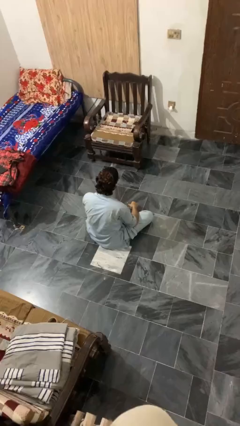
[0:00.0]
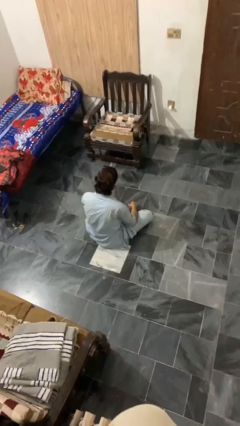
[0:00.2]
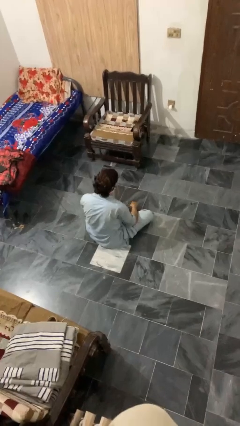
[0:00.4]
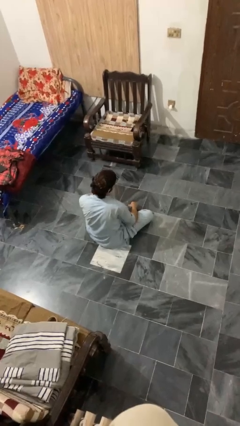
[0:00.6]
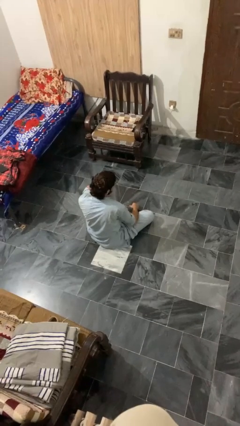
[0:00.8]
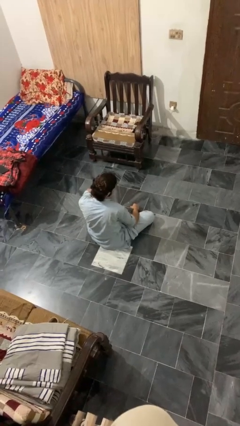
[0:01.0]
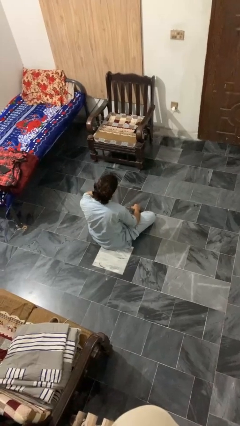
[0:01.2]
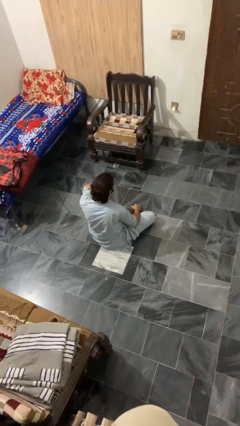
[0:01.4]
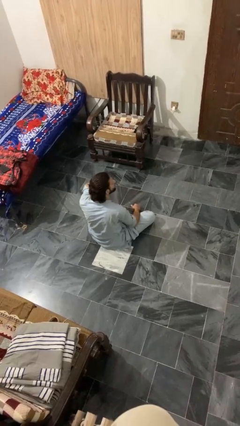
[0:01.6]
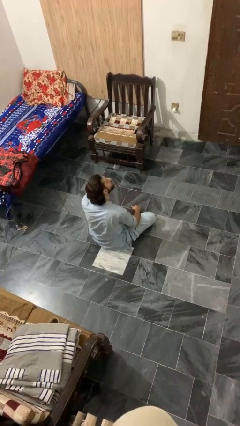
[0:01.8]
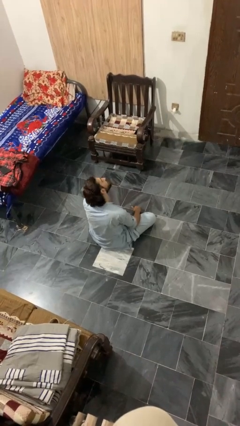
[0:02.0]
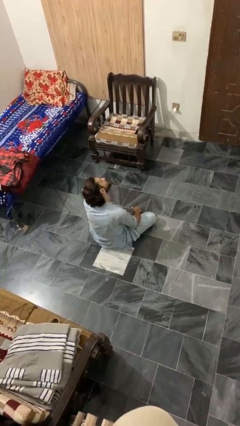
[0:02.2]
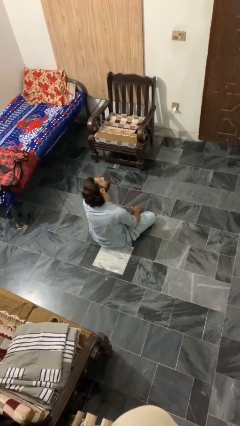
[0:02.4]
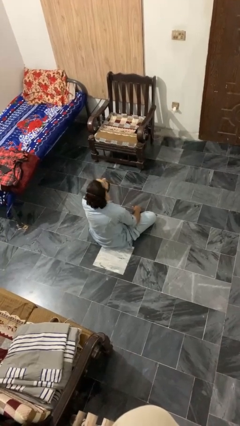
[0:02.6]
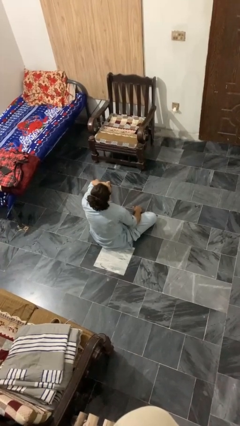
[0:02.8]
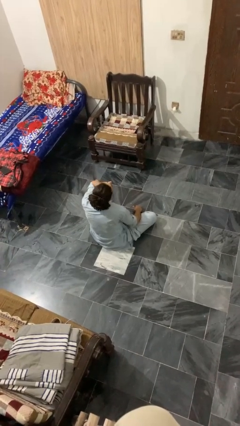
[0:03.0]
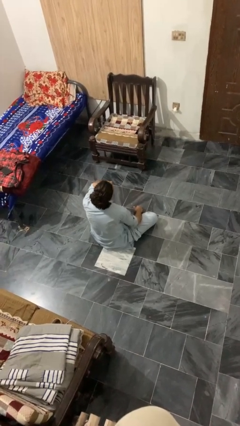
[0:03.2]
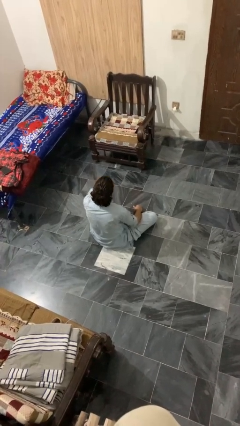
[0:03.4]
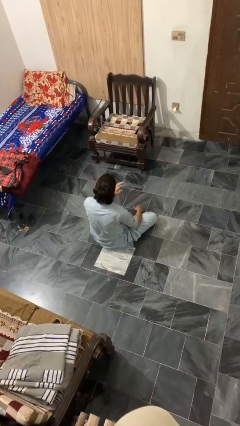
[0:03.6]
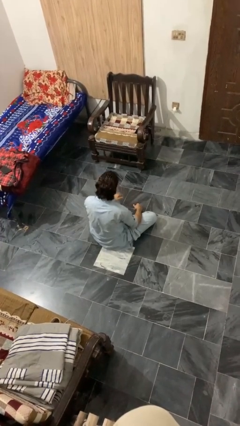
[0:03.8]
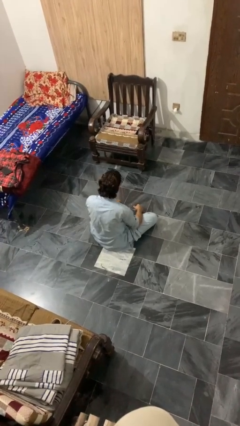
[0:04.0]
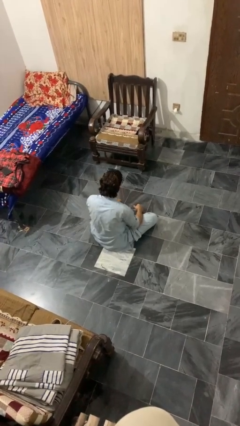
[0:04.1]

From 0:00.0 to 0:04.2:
person rubs neck

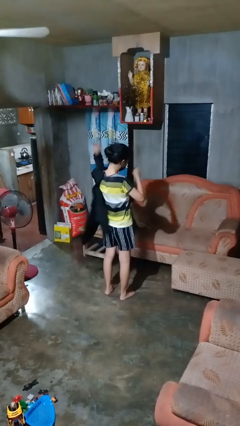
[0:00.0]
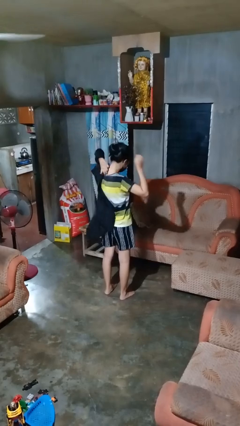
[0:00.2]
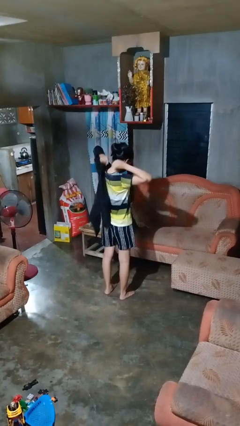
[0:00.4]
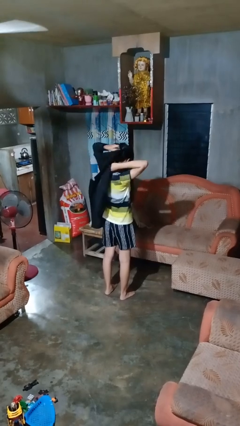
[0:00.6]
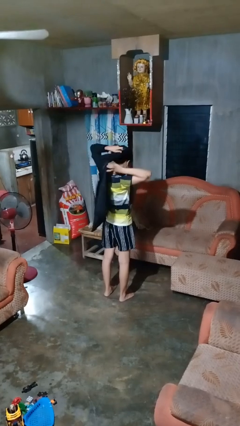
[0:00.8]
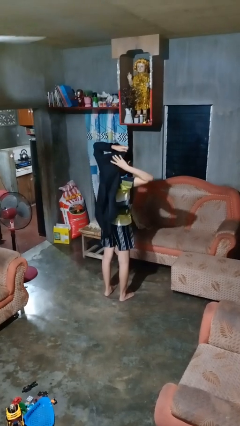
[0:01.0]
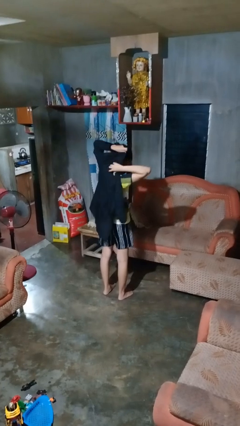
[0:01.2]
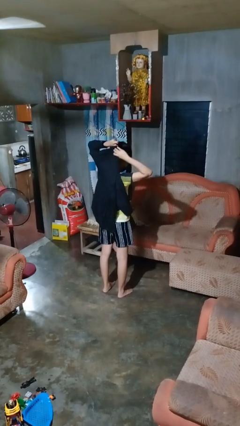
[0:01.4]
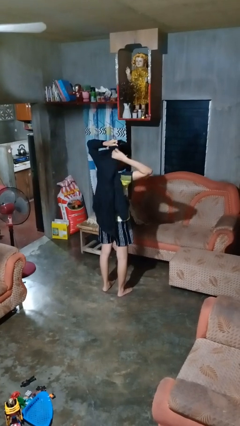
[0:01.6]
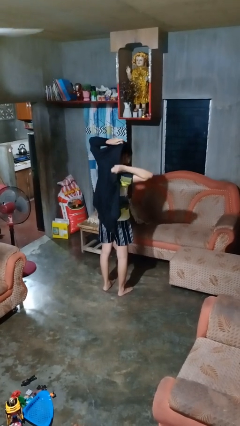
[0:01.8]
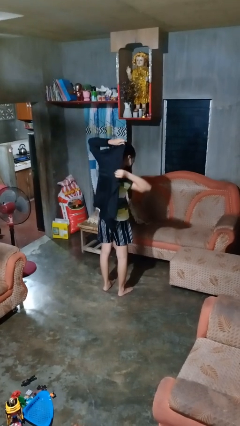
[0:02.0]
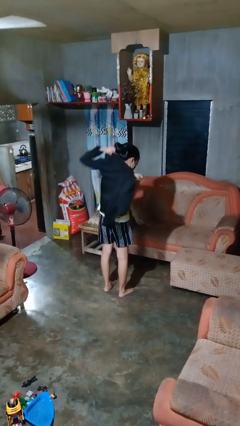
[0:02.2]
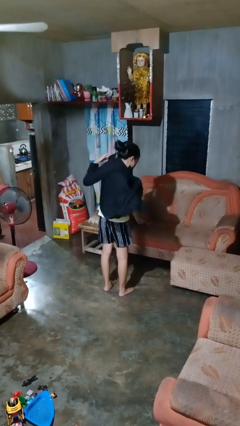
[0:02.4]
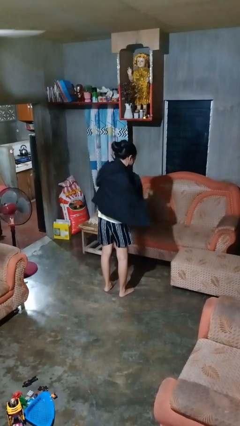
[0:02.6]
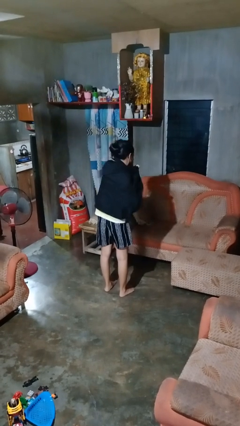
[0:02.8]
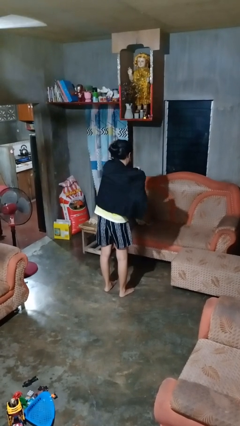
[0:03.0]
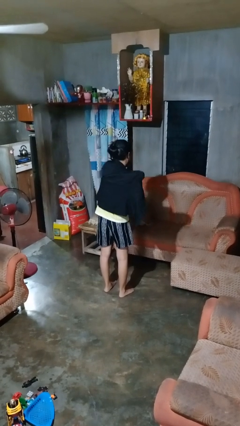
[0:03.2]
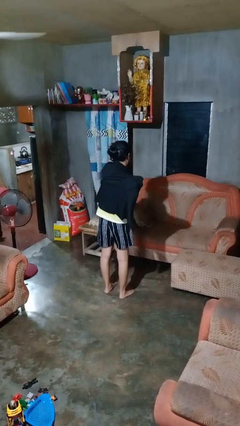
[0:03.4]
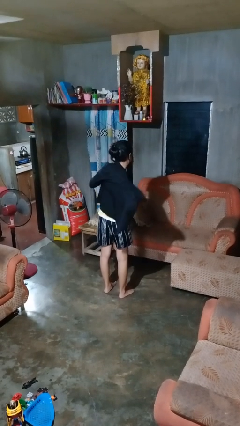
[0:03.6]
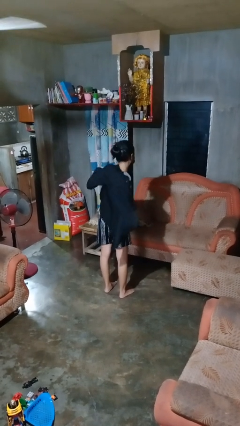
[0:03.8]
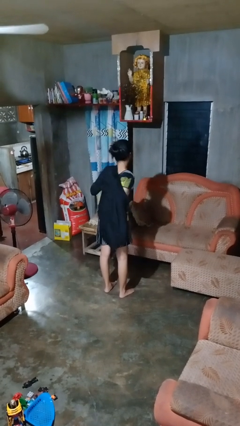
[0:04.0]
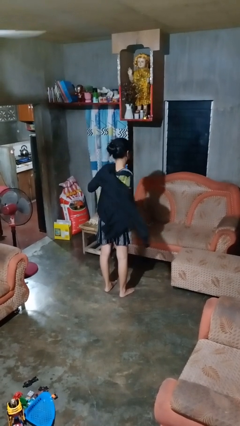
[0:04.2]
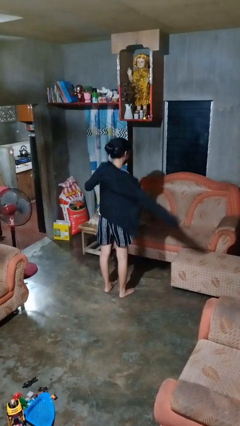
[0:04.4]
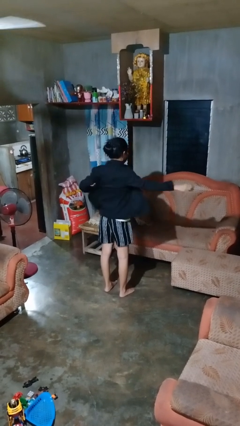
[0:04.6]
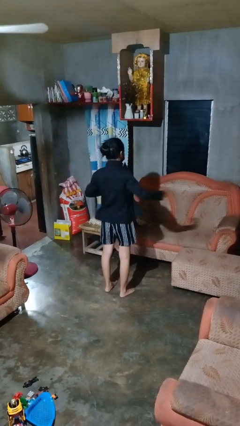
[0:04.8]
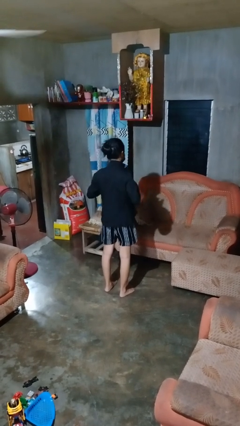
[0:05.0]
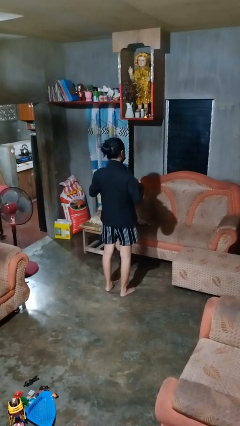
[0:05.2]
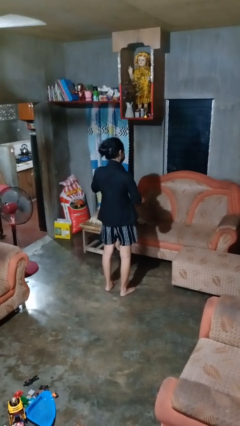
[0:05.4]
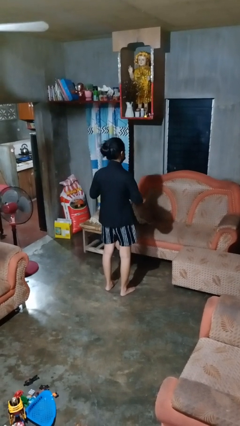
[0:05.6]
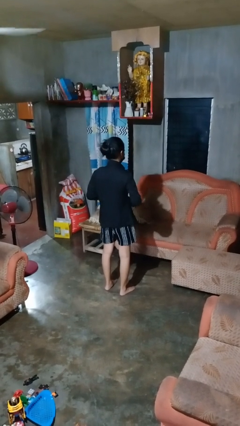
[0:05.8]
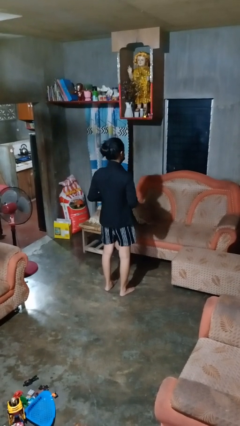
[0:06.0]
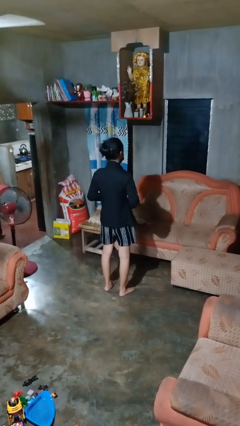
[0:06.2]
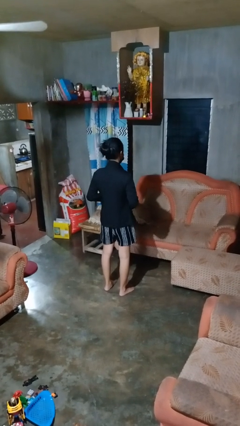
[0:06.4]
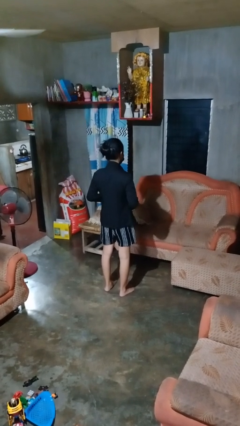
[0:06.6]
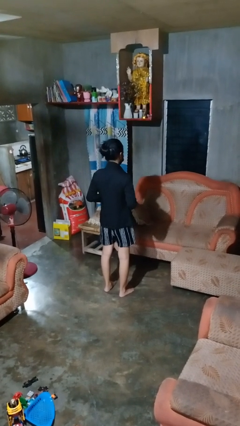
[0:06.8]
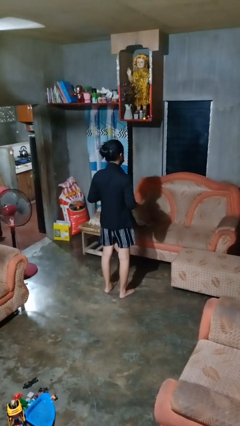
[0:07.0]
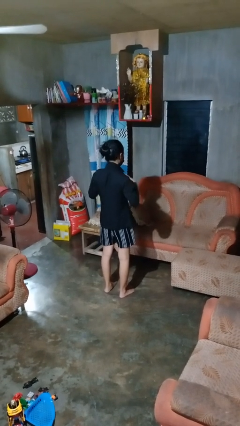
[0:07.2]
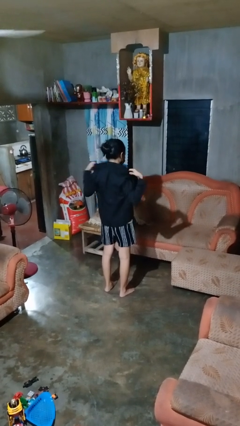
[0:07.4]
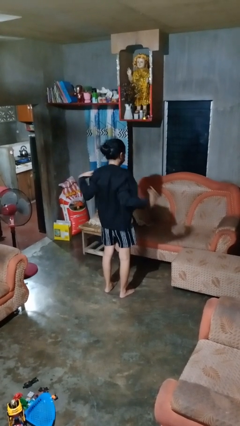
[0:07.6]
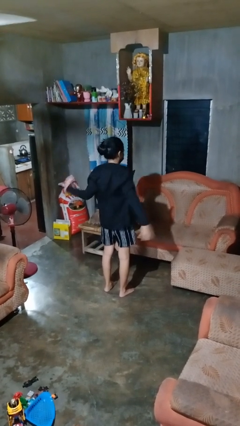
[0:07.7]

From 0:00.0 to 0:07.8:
person puts on shirt

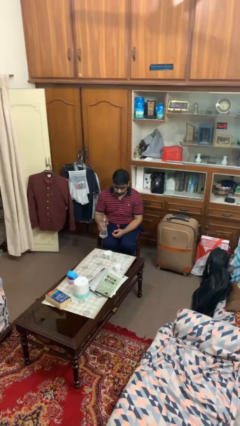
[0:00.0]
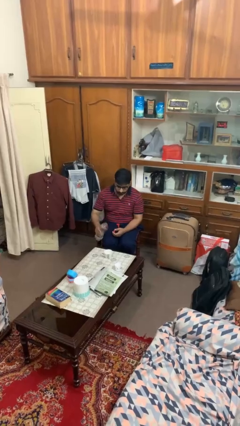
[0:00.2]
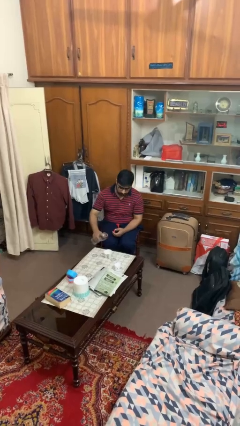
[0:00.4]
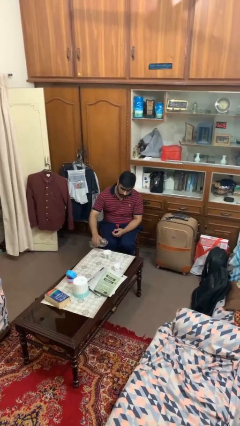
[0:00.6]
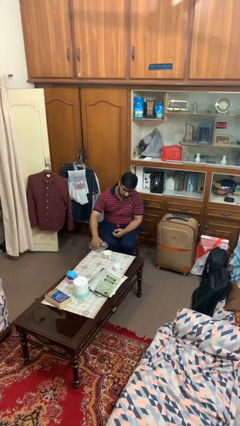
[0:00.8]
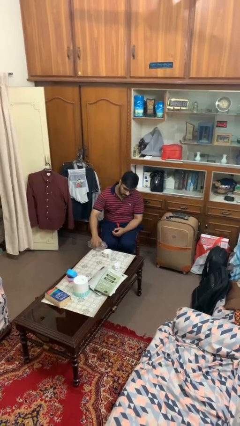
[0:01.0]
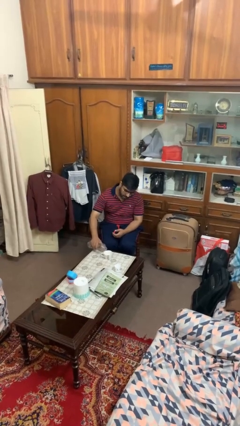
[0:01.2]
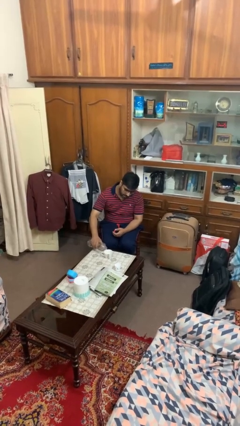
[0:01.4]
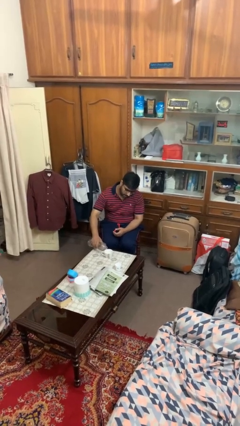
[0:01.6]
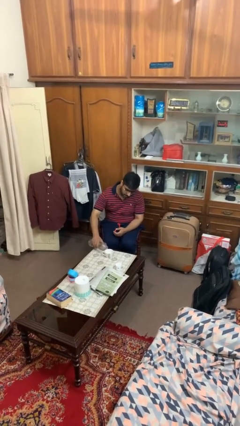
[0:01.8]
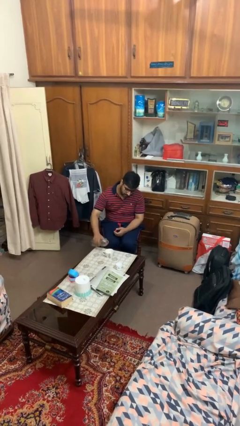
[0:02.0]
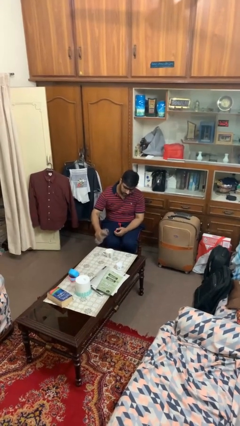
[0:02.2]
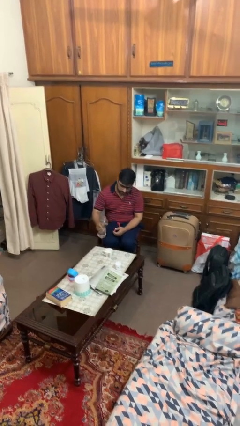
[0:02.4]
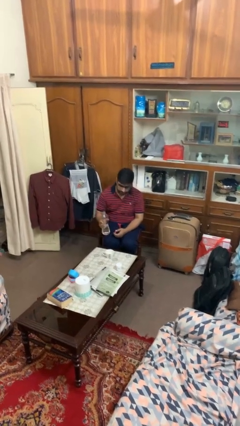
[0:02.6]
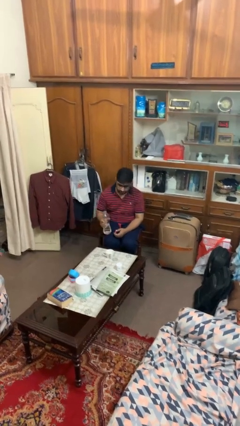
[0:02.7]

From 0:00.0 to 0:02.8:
person pours liquid into cup

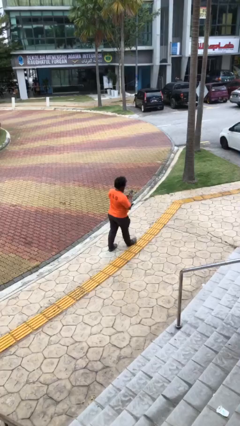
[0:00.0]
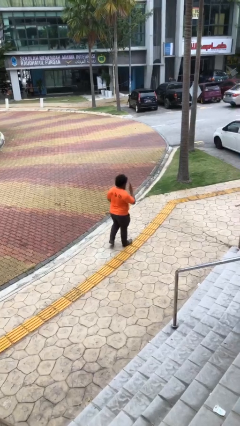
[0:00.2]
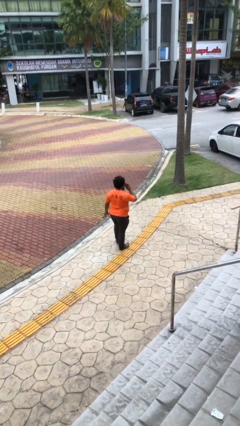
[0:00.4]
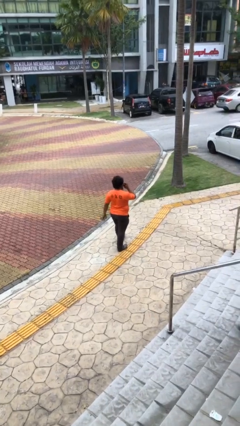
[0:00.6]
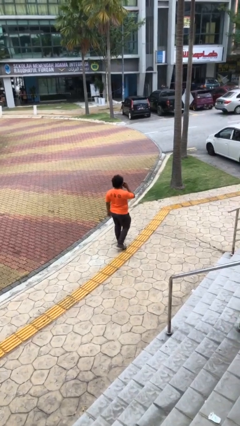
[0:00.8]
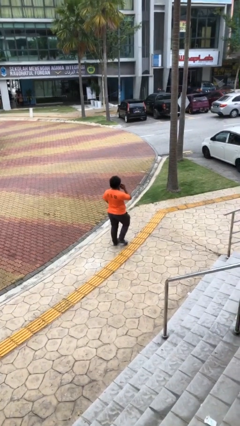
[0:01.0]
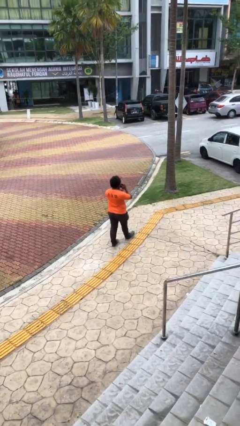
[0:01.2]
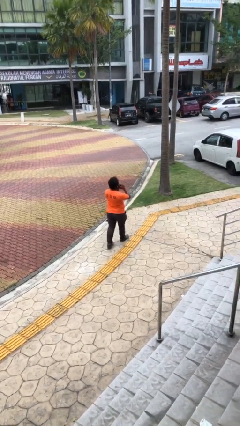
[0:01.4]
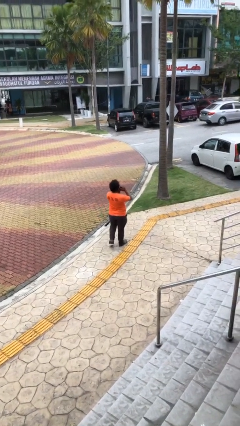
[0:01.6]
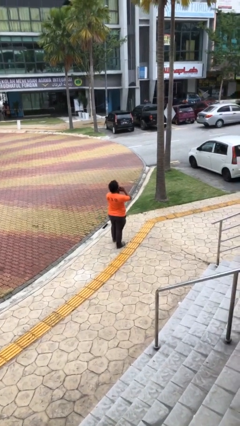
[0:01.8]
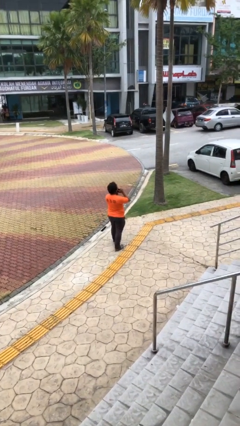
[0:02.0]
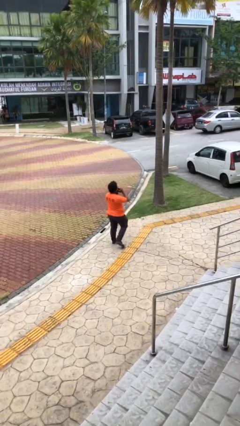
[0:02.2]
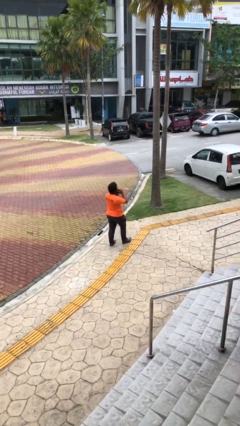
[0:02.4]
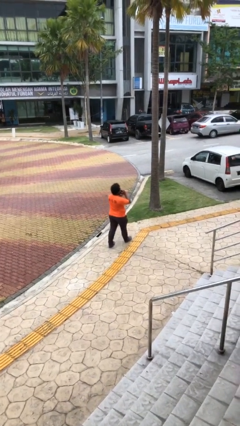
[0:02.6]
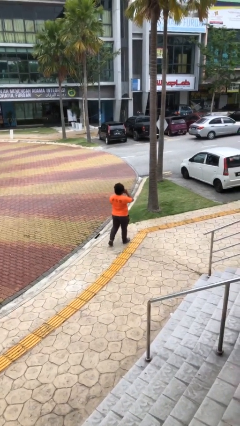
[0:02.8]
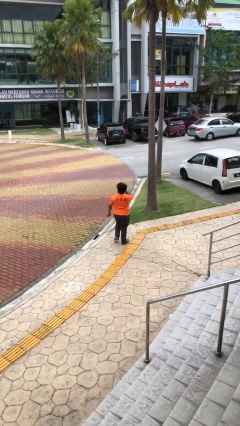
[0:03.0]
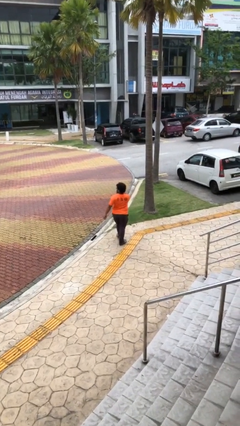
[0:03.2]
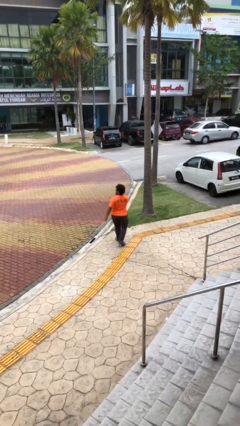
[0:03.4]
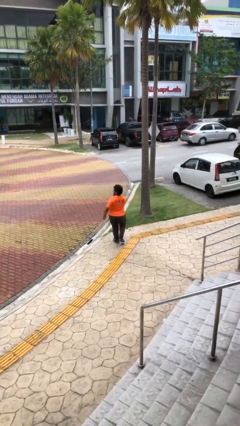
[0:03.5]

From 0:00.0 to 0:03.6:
person talks on phone
